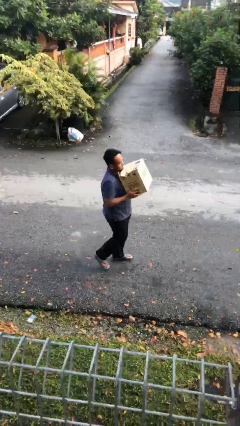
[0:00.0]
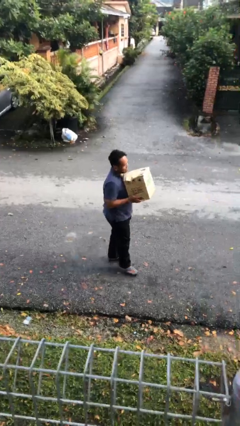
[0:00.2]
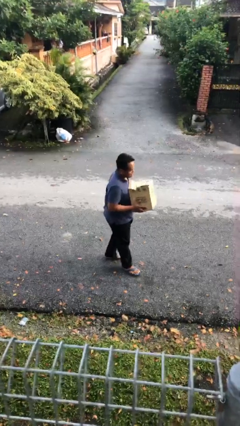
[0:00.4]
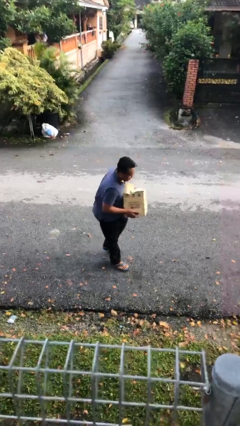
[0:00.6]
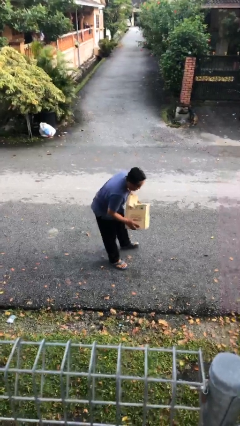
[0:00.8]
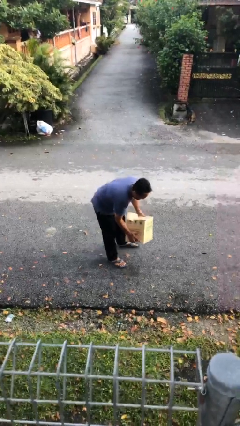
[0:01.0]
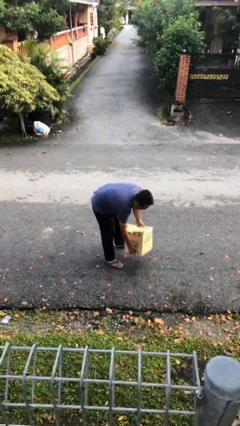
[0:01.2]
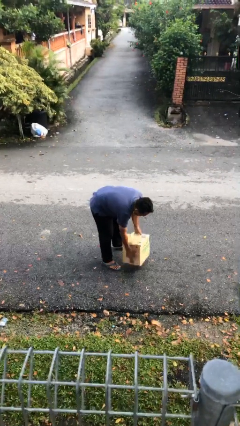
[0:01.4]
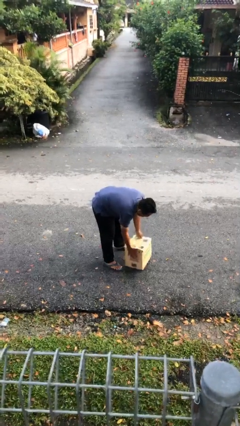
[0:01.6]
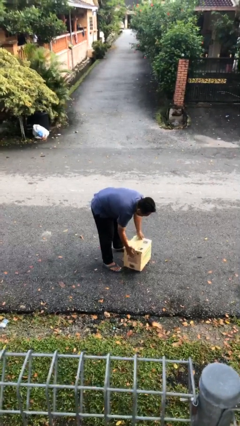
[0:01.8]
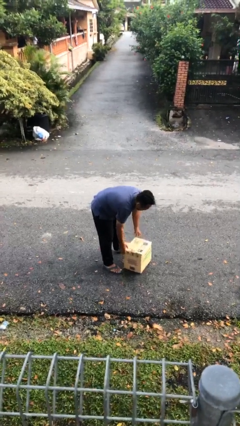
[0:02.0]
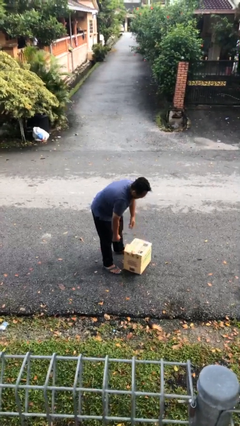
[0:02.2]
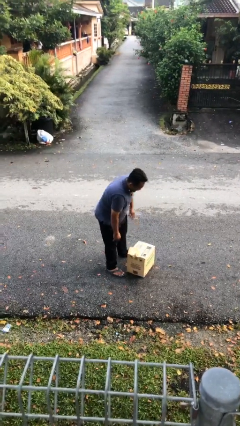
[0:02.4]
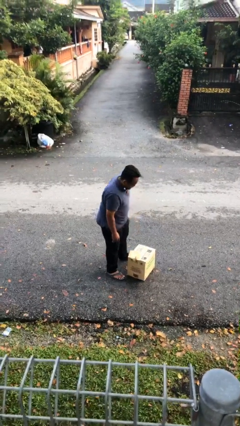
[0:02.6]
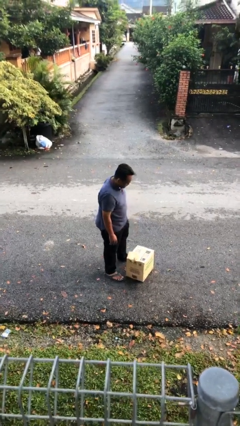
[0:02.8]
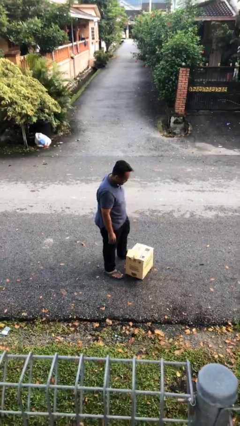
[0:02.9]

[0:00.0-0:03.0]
person puts down object on floor

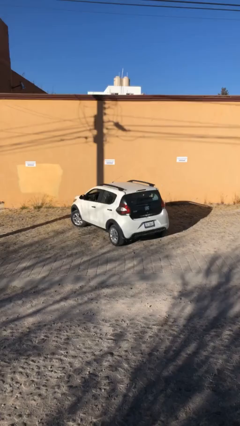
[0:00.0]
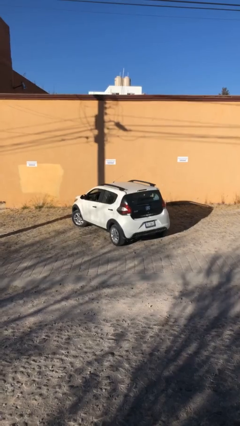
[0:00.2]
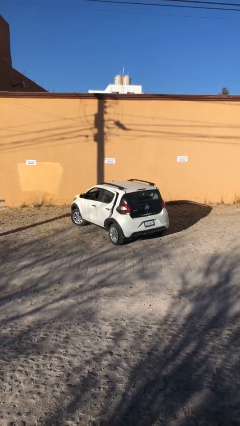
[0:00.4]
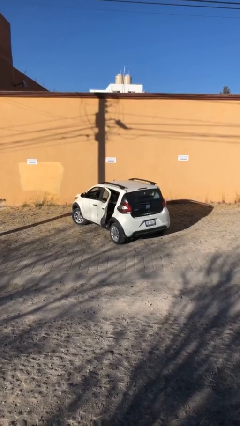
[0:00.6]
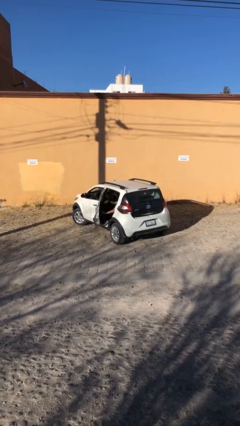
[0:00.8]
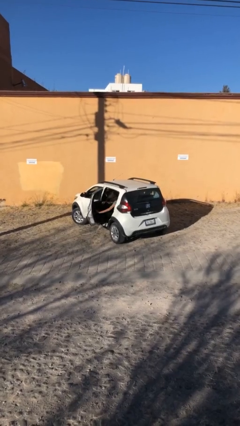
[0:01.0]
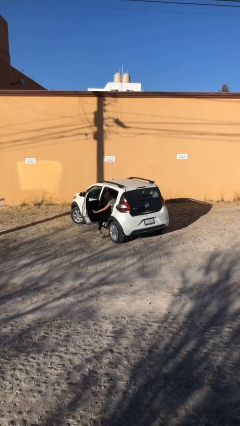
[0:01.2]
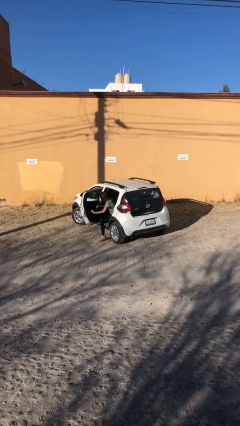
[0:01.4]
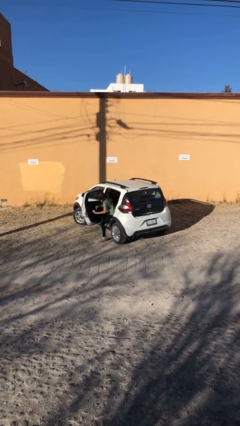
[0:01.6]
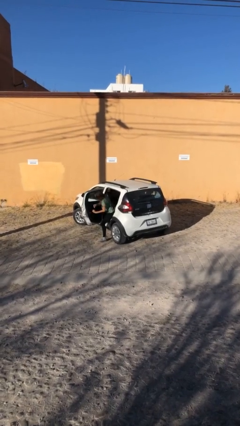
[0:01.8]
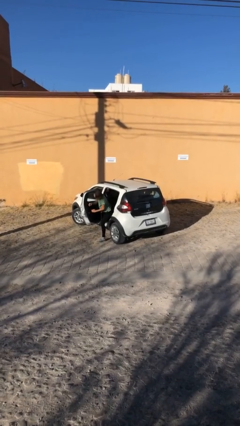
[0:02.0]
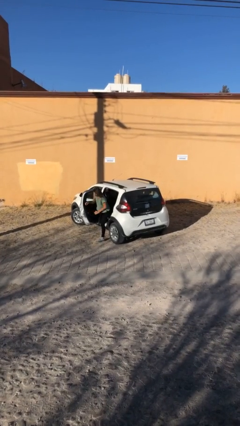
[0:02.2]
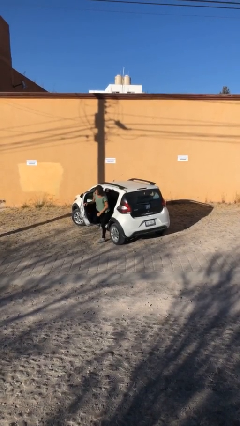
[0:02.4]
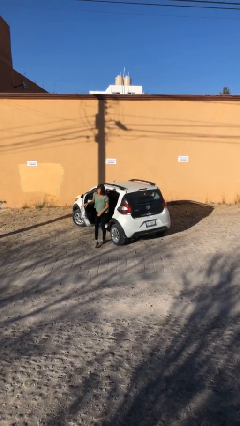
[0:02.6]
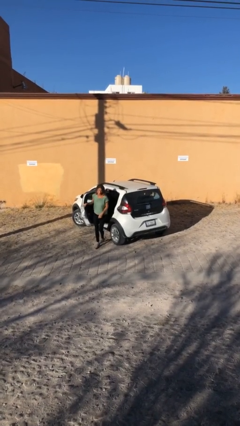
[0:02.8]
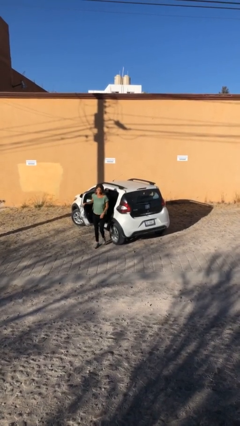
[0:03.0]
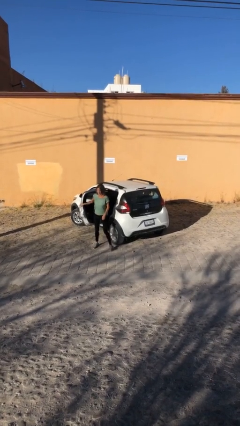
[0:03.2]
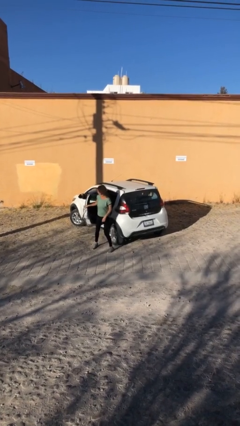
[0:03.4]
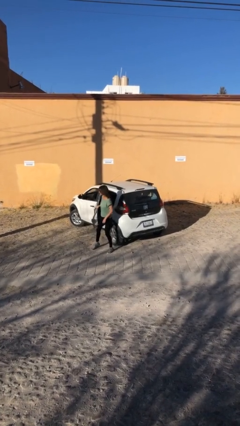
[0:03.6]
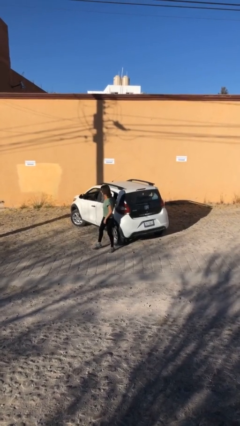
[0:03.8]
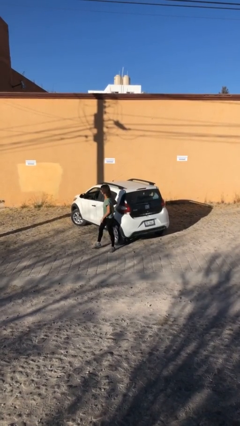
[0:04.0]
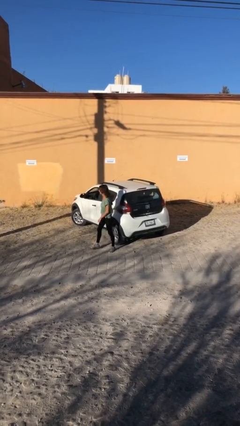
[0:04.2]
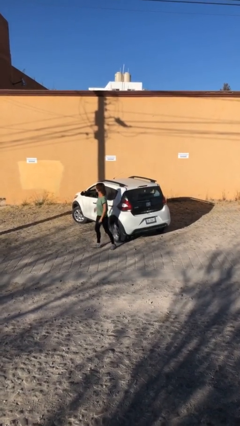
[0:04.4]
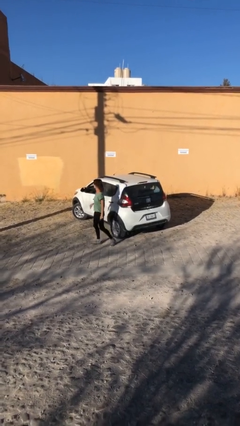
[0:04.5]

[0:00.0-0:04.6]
car drops off person

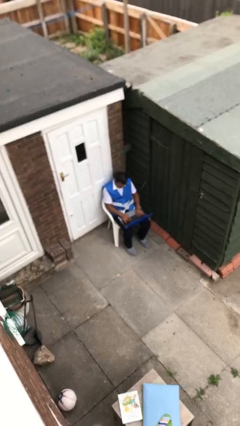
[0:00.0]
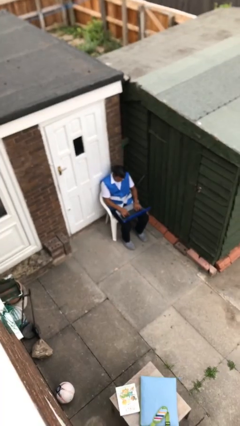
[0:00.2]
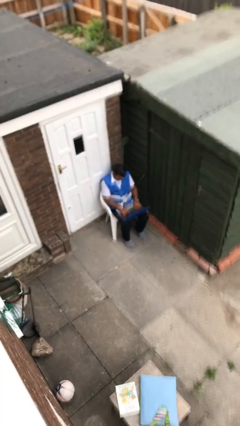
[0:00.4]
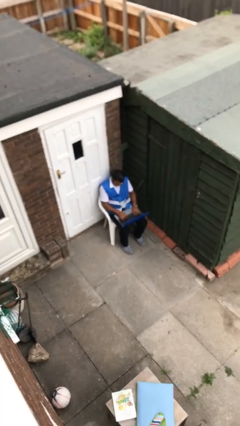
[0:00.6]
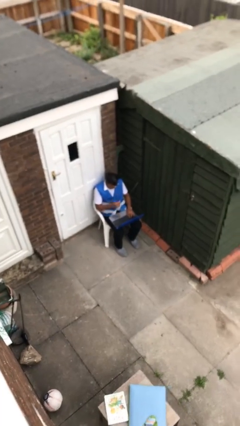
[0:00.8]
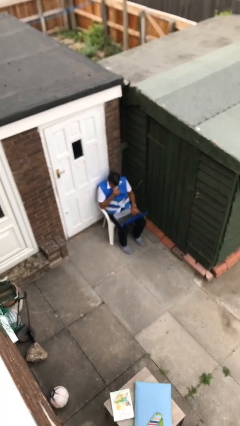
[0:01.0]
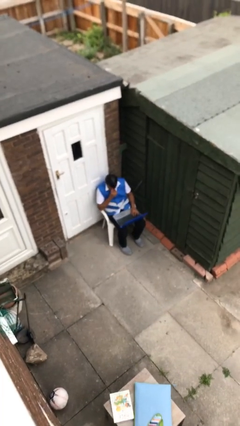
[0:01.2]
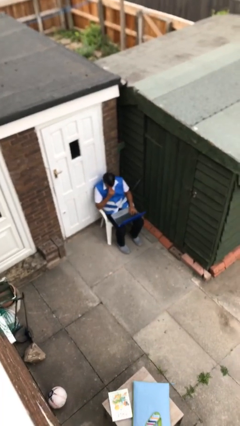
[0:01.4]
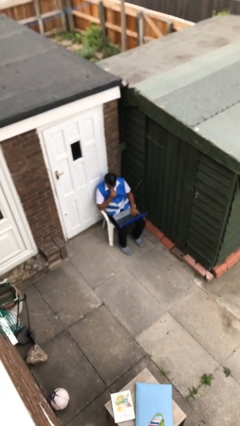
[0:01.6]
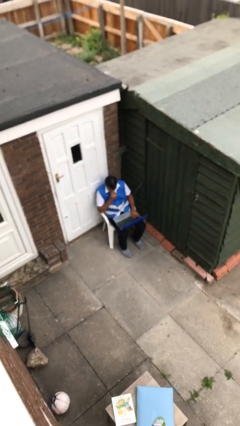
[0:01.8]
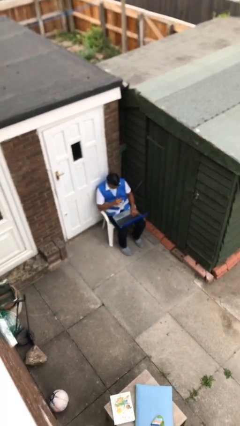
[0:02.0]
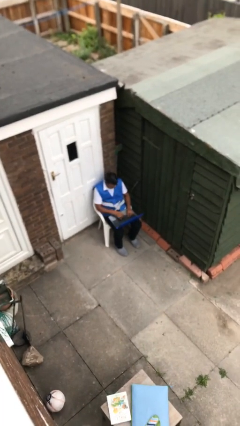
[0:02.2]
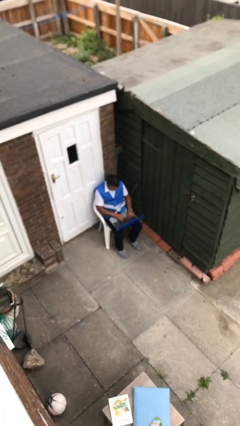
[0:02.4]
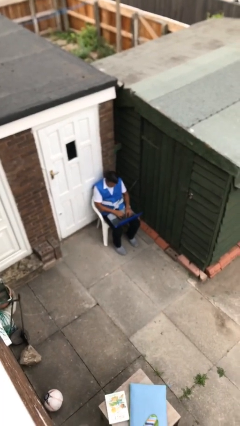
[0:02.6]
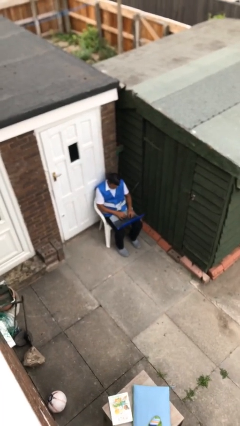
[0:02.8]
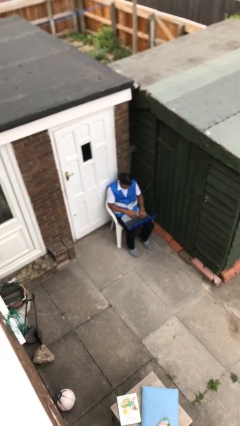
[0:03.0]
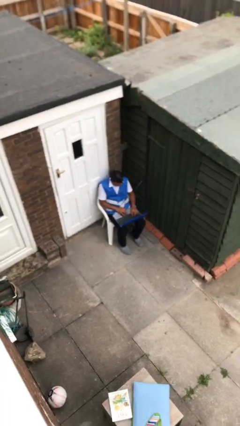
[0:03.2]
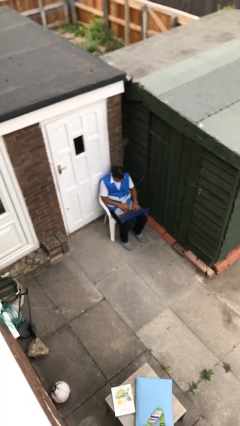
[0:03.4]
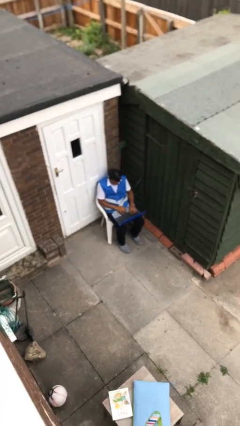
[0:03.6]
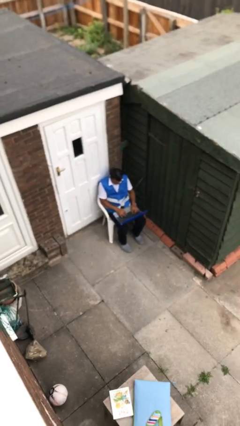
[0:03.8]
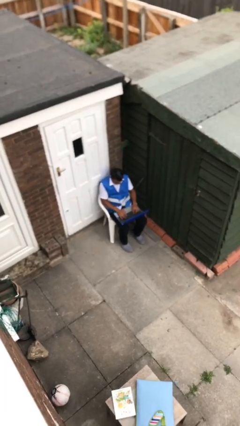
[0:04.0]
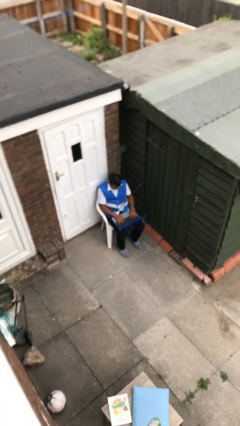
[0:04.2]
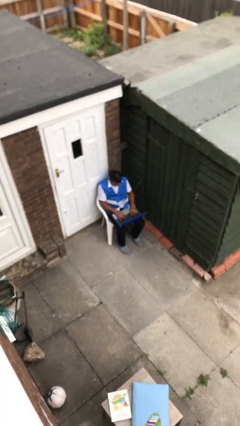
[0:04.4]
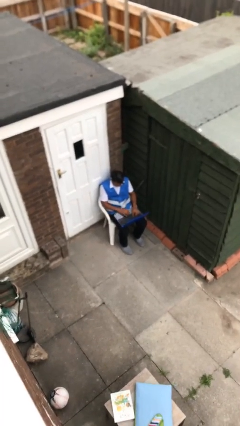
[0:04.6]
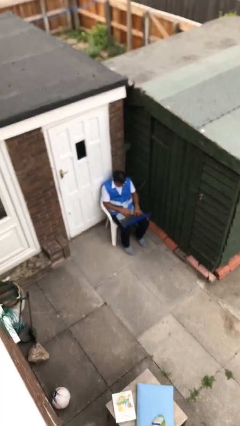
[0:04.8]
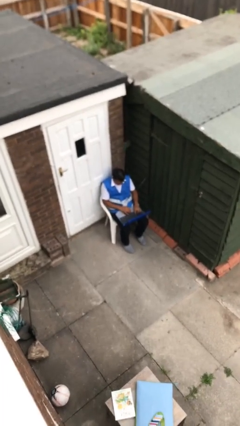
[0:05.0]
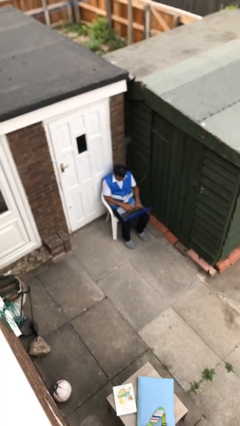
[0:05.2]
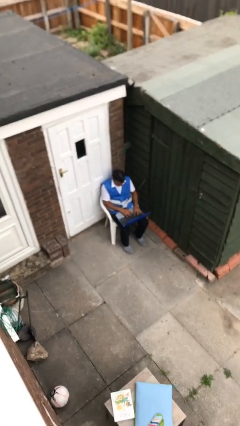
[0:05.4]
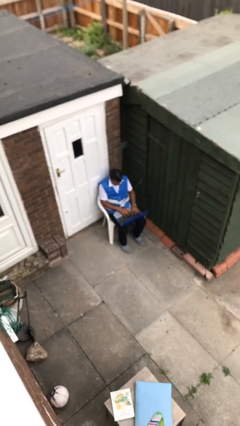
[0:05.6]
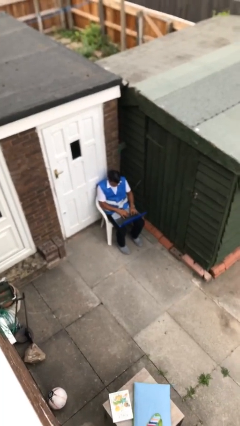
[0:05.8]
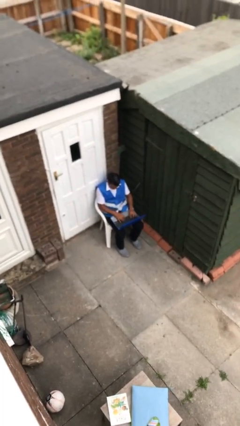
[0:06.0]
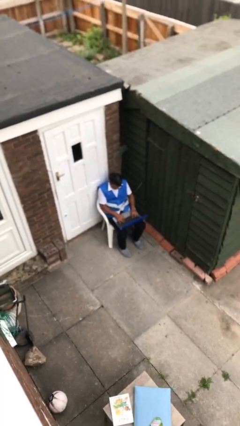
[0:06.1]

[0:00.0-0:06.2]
person interacts with laptop

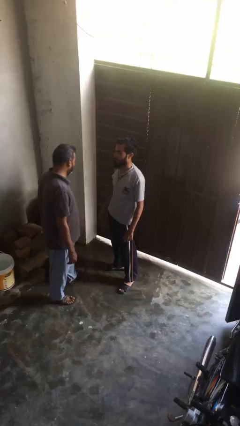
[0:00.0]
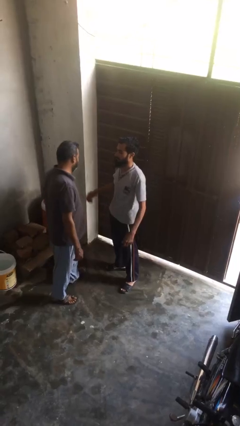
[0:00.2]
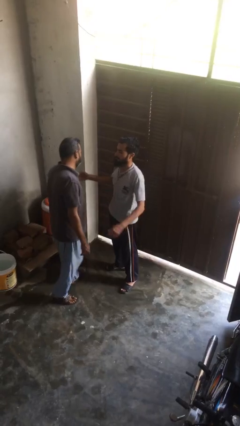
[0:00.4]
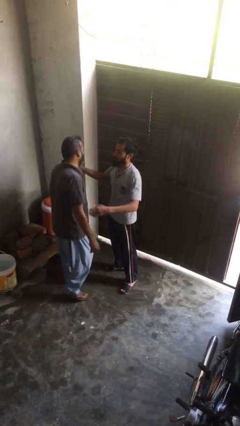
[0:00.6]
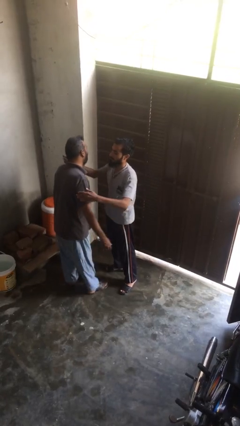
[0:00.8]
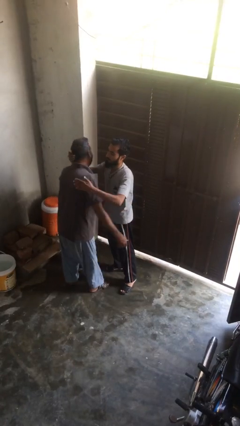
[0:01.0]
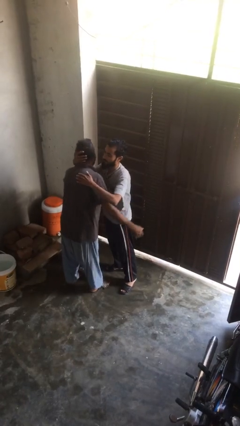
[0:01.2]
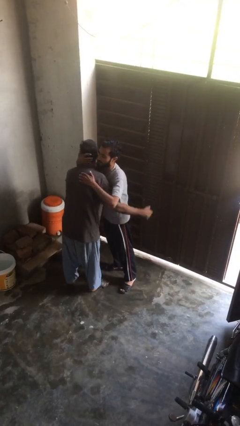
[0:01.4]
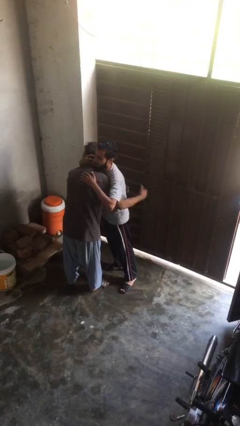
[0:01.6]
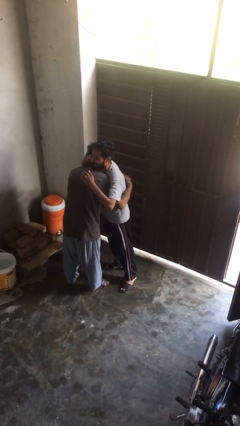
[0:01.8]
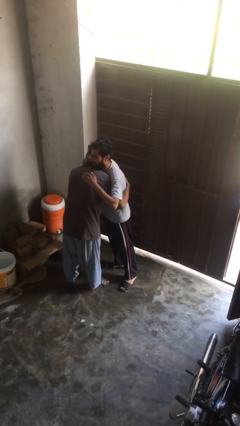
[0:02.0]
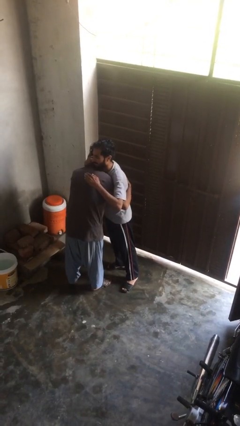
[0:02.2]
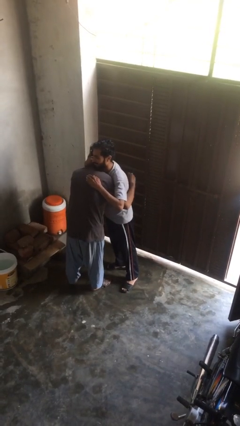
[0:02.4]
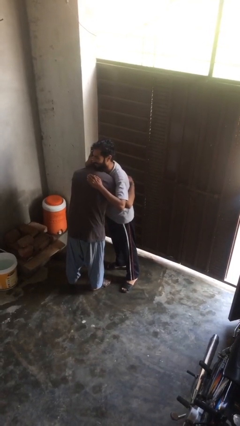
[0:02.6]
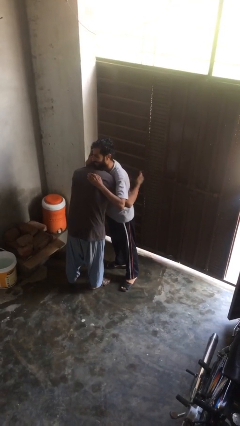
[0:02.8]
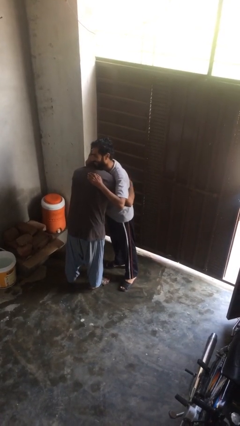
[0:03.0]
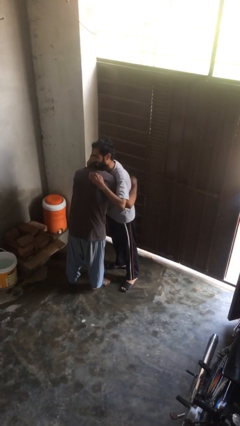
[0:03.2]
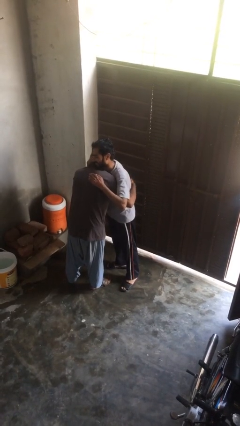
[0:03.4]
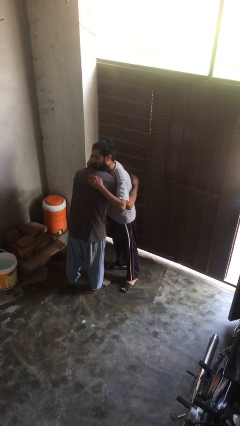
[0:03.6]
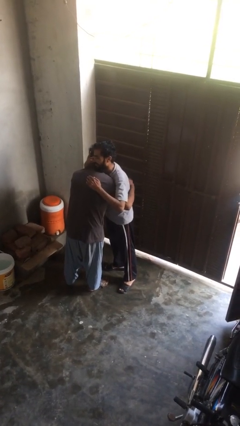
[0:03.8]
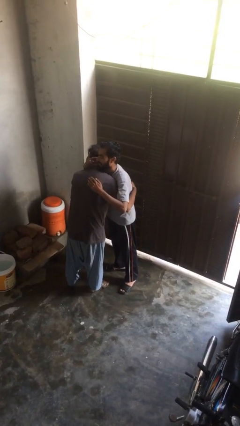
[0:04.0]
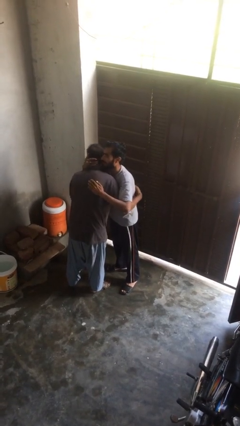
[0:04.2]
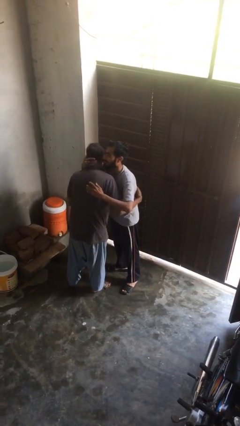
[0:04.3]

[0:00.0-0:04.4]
person embraces person
